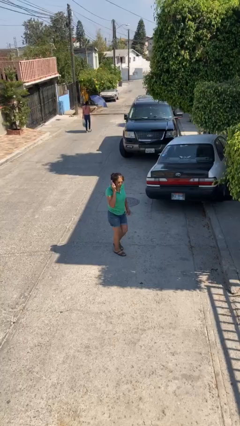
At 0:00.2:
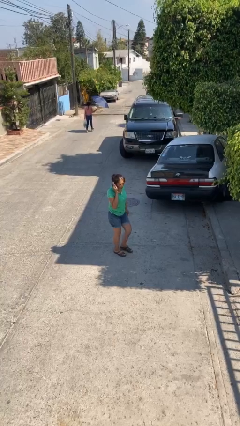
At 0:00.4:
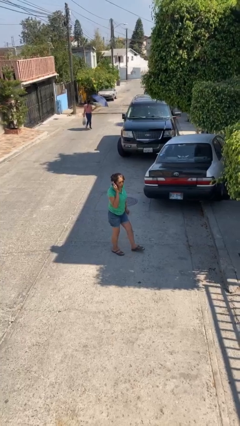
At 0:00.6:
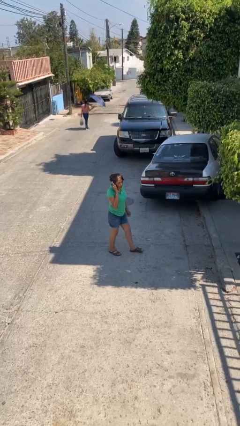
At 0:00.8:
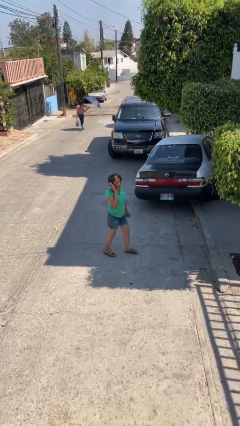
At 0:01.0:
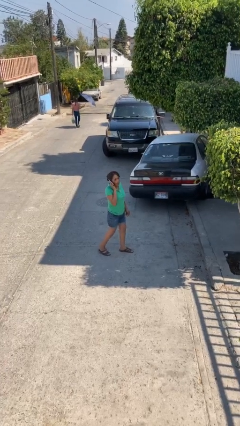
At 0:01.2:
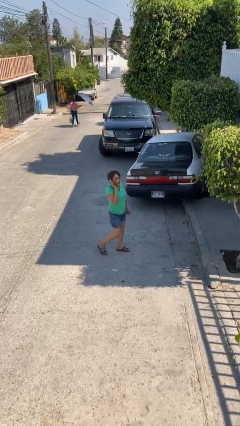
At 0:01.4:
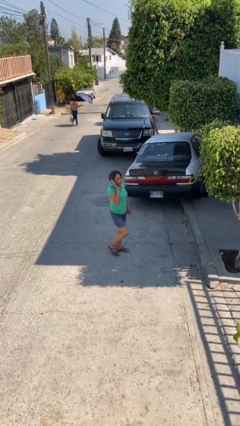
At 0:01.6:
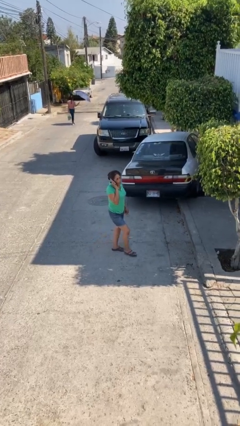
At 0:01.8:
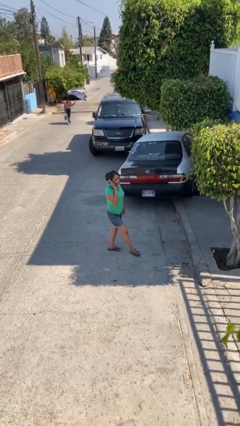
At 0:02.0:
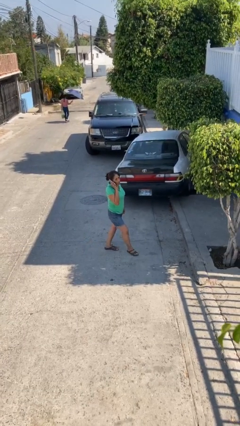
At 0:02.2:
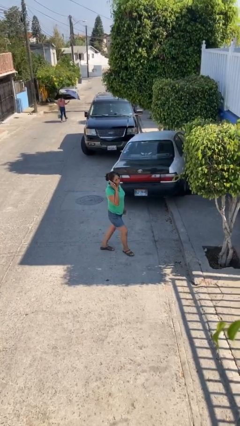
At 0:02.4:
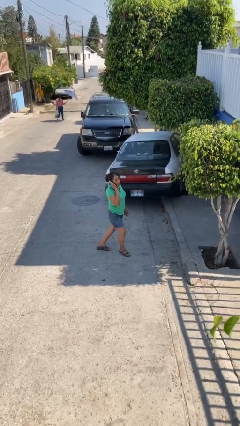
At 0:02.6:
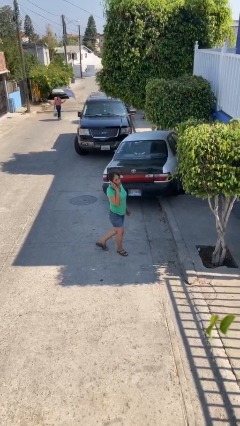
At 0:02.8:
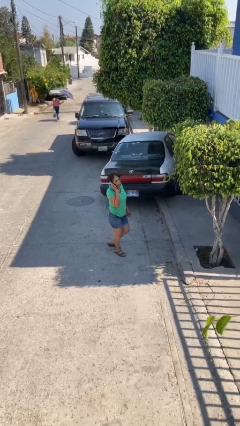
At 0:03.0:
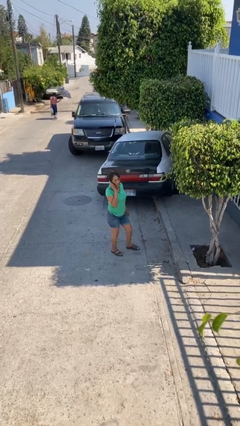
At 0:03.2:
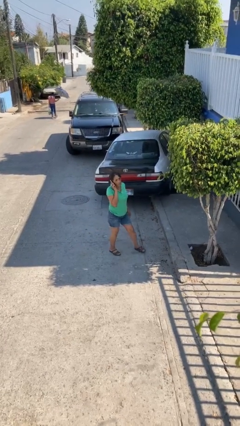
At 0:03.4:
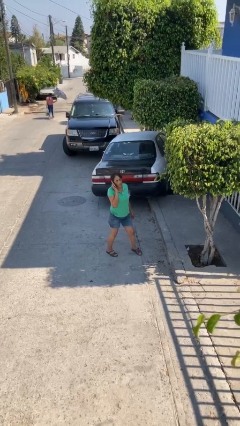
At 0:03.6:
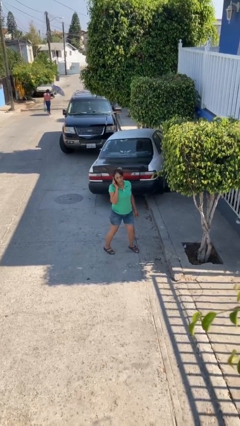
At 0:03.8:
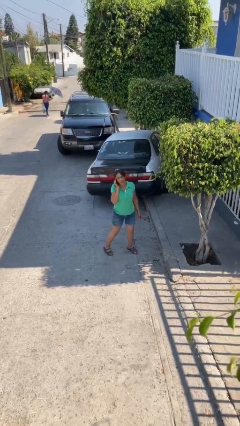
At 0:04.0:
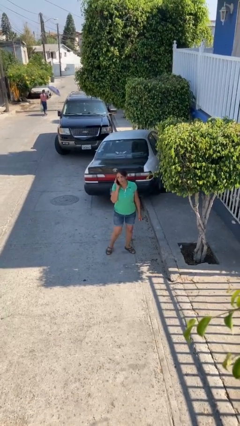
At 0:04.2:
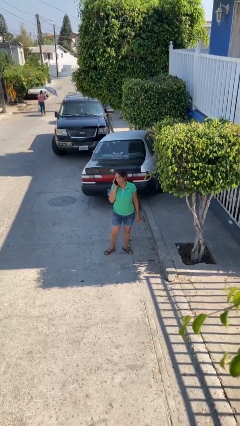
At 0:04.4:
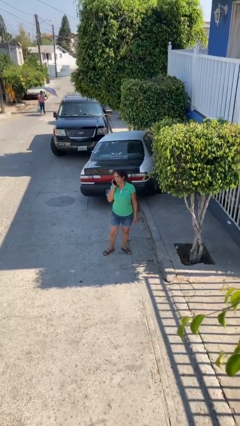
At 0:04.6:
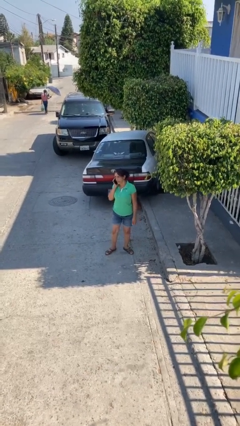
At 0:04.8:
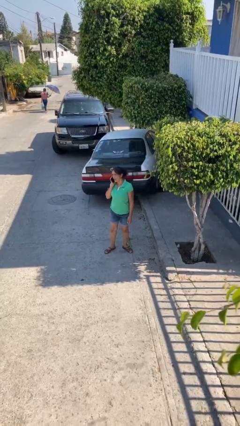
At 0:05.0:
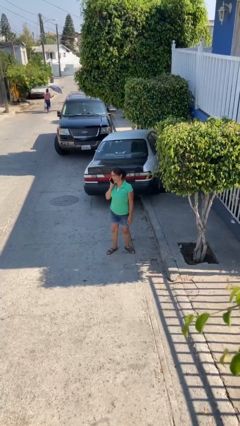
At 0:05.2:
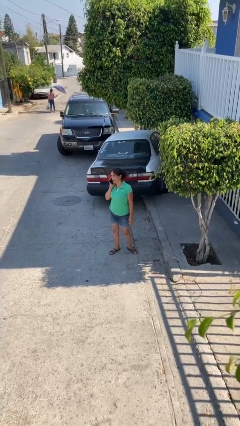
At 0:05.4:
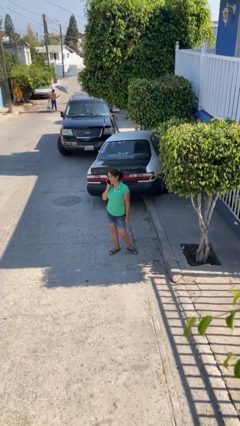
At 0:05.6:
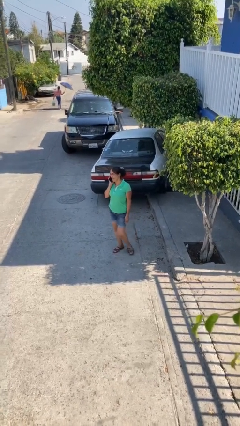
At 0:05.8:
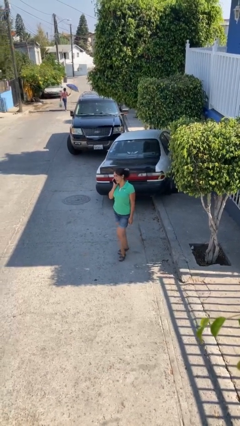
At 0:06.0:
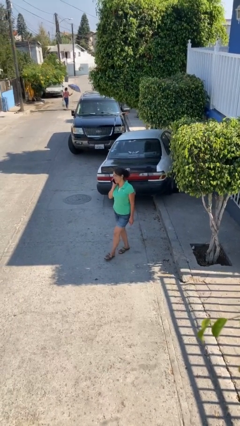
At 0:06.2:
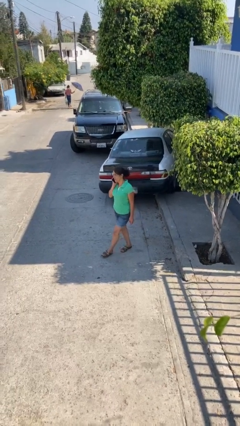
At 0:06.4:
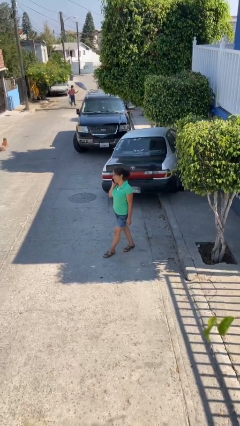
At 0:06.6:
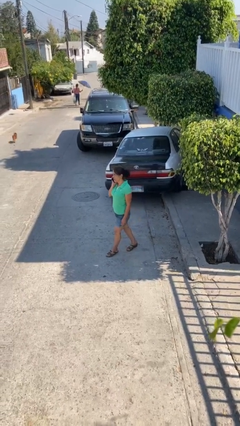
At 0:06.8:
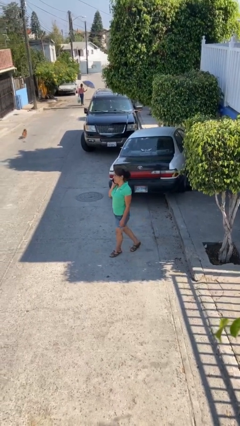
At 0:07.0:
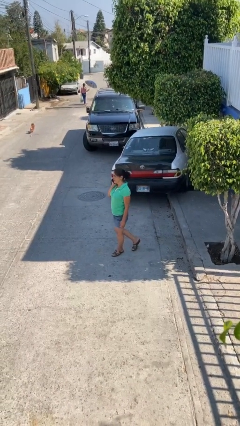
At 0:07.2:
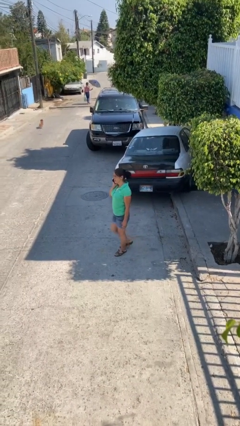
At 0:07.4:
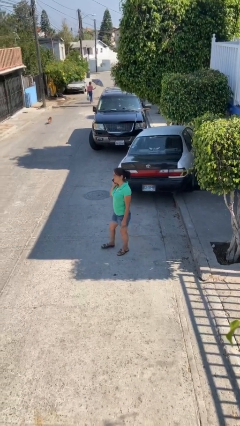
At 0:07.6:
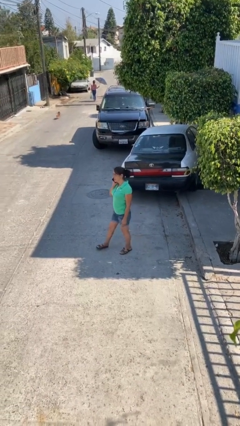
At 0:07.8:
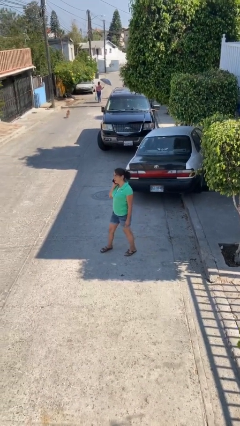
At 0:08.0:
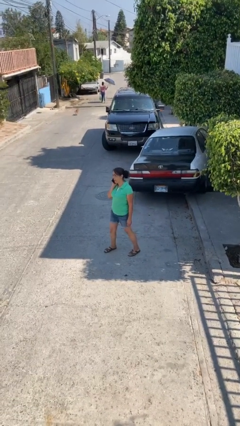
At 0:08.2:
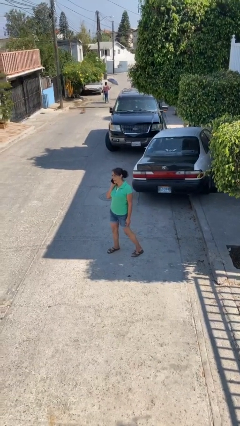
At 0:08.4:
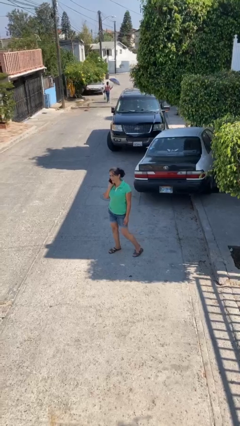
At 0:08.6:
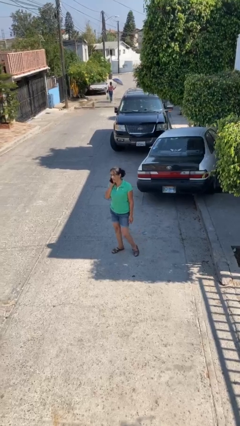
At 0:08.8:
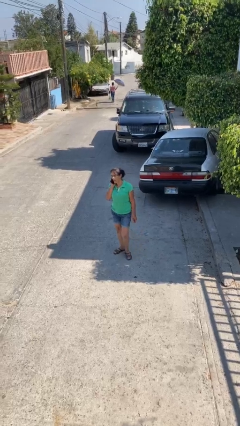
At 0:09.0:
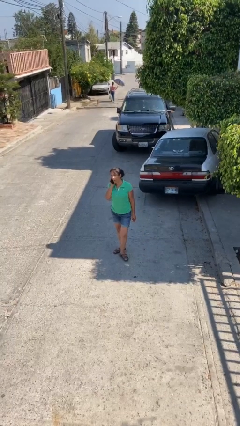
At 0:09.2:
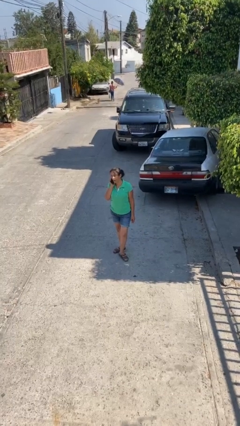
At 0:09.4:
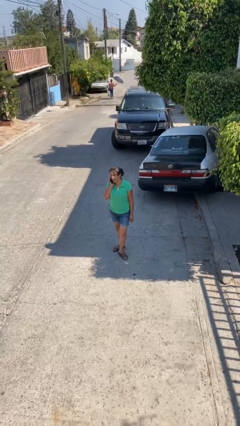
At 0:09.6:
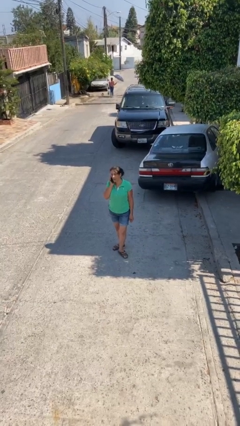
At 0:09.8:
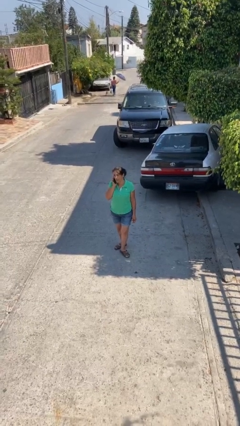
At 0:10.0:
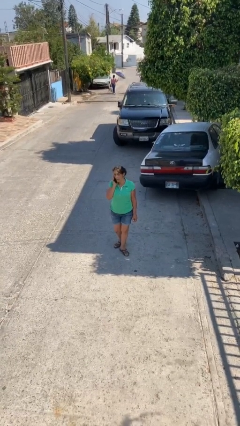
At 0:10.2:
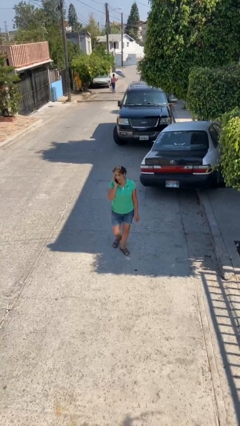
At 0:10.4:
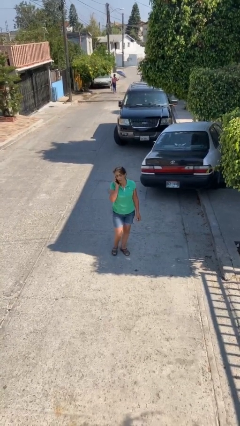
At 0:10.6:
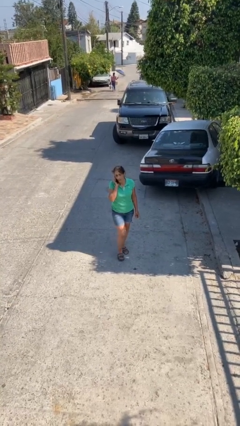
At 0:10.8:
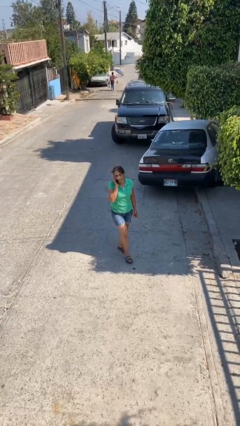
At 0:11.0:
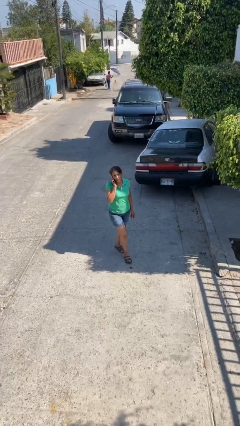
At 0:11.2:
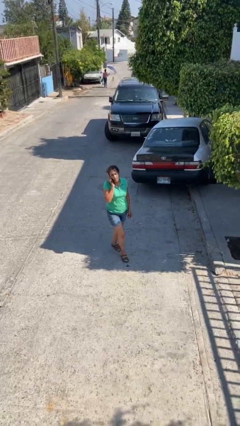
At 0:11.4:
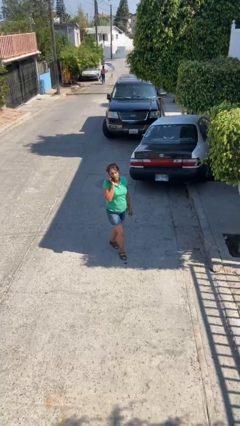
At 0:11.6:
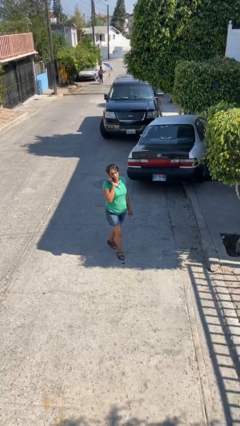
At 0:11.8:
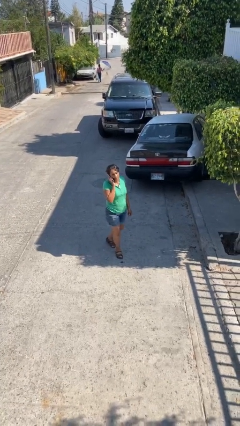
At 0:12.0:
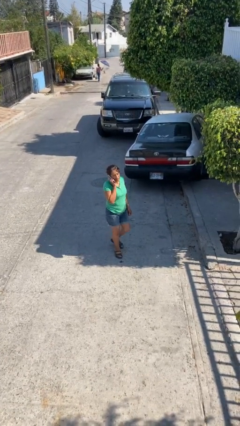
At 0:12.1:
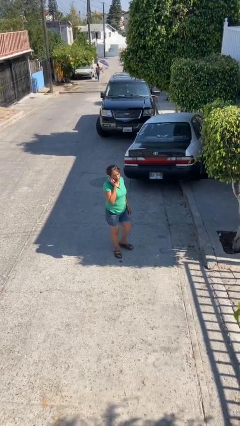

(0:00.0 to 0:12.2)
person talks on phone

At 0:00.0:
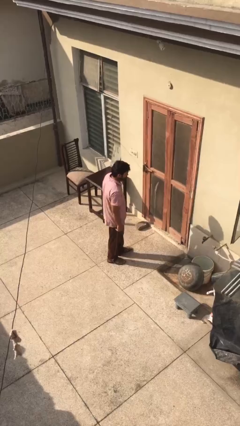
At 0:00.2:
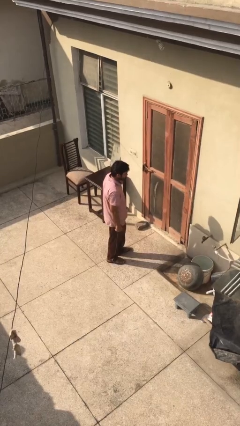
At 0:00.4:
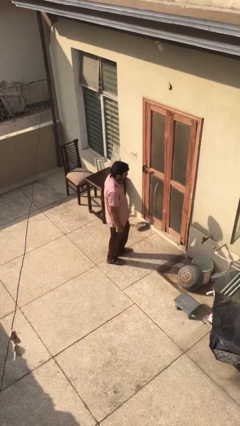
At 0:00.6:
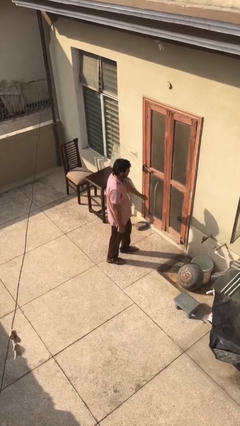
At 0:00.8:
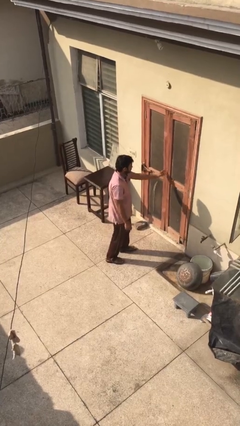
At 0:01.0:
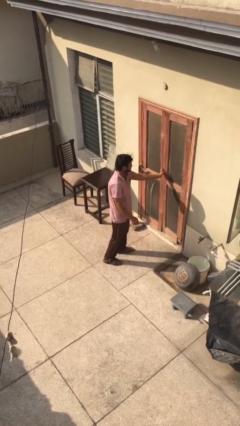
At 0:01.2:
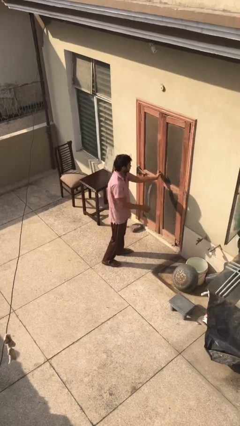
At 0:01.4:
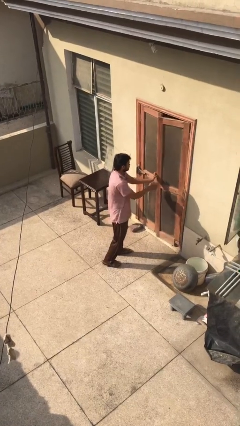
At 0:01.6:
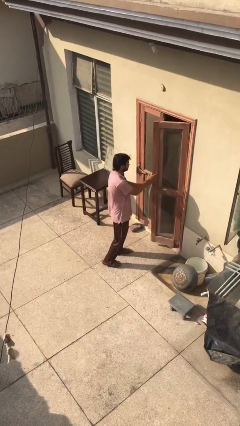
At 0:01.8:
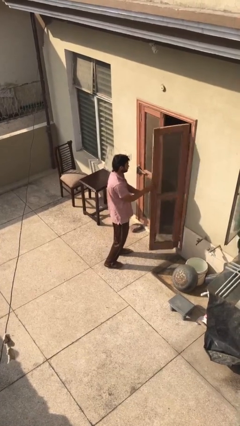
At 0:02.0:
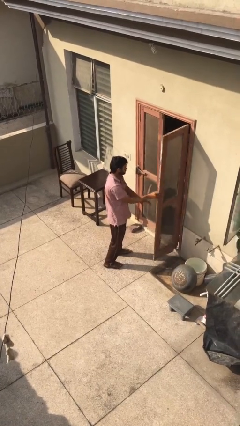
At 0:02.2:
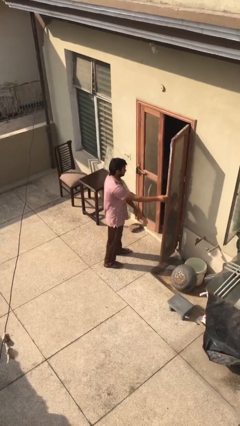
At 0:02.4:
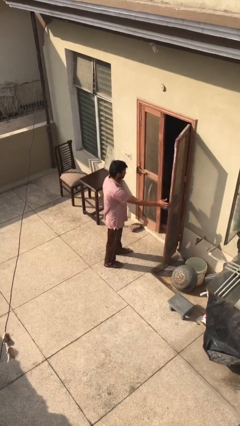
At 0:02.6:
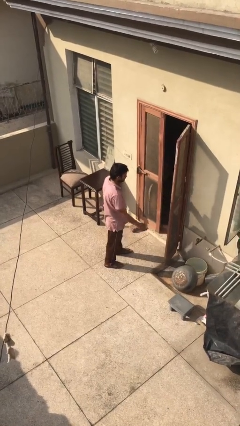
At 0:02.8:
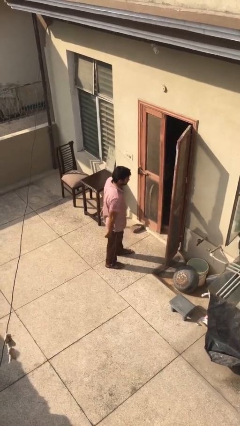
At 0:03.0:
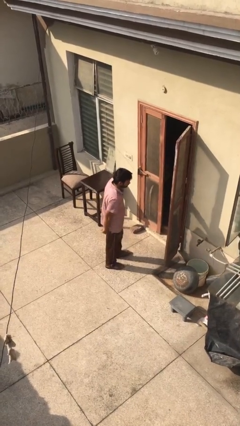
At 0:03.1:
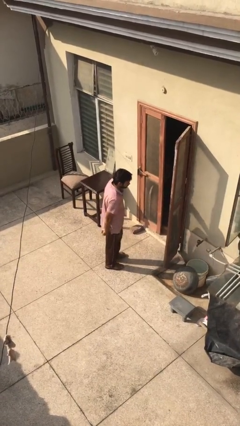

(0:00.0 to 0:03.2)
person opens facility door

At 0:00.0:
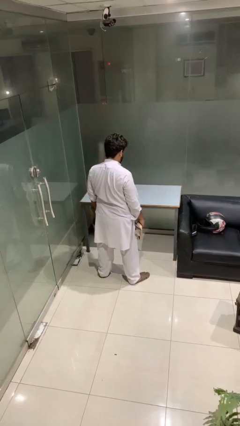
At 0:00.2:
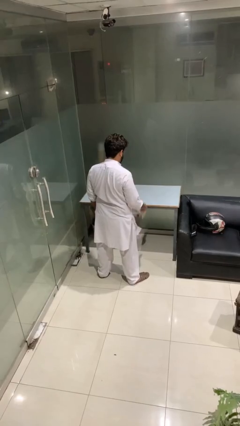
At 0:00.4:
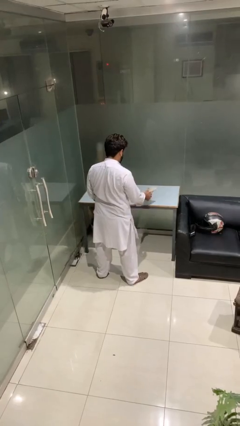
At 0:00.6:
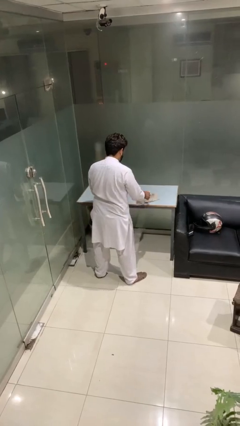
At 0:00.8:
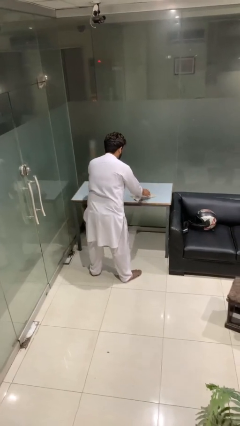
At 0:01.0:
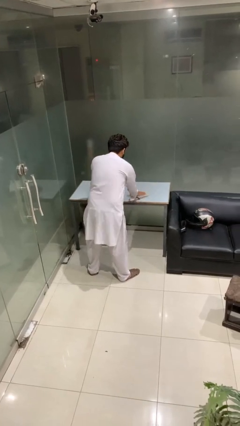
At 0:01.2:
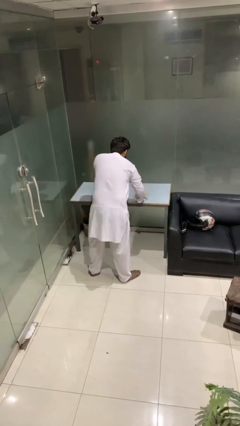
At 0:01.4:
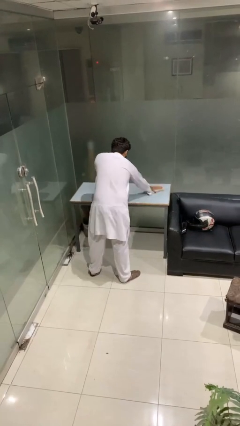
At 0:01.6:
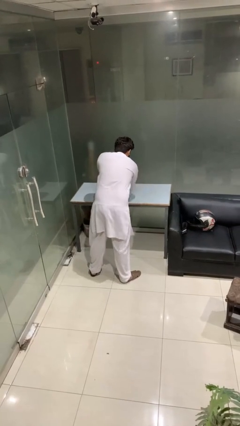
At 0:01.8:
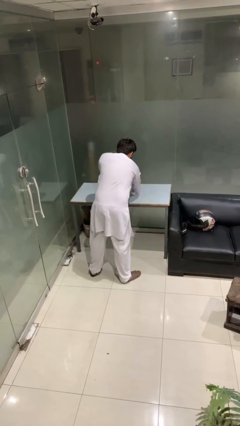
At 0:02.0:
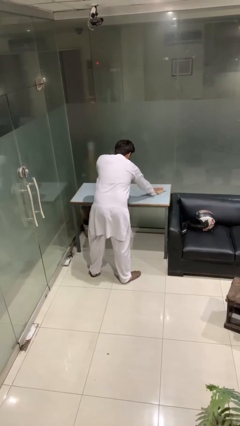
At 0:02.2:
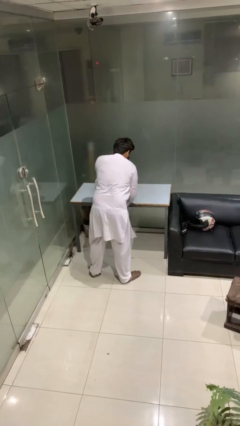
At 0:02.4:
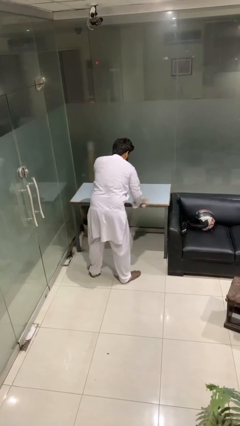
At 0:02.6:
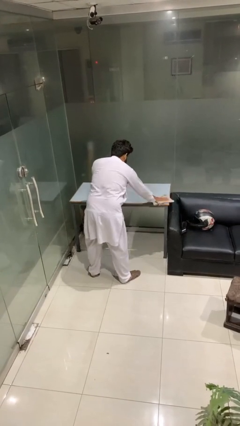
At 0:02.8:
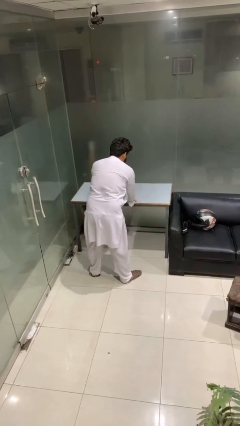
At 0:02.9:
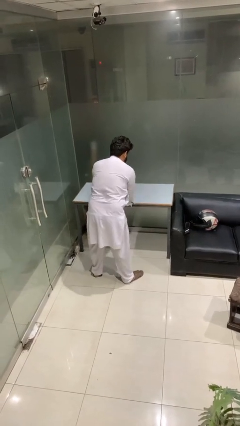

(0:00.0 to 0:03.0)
person cleans table with rag
